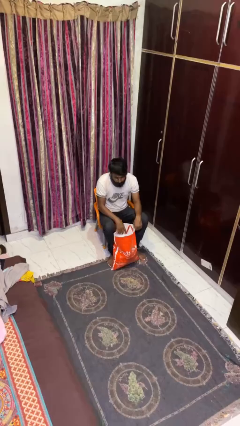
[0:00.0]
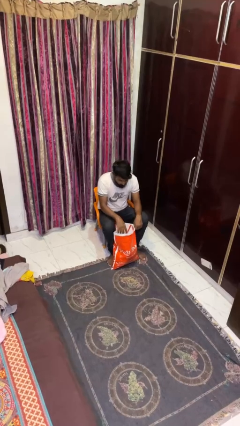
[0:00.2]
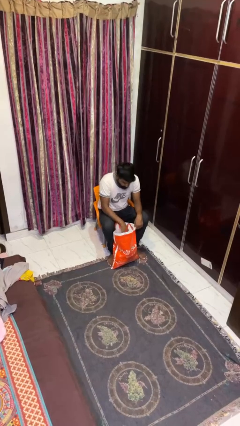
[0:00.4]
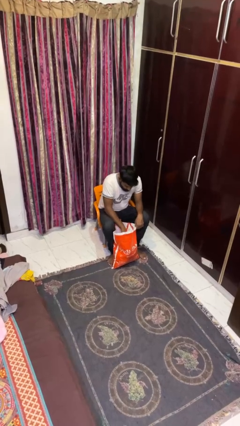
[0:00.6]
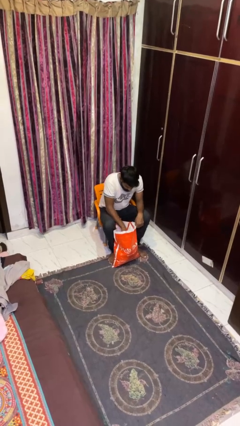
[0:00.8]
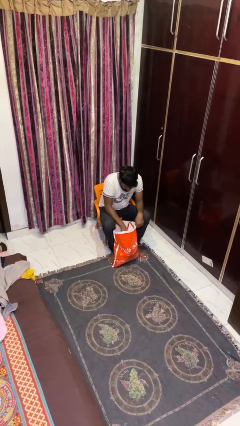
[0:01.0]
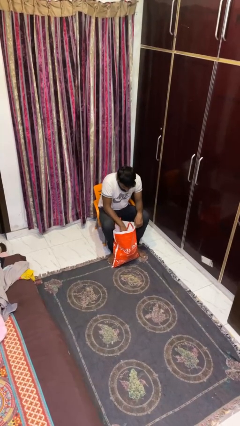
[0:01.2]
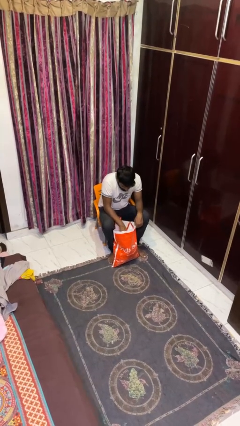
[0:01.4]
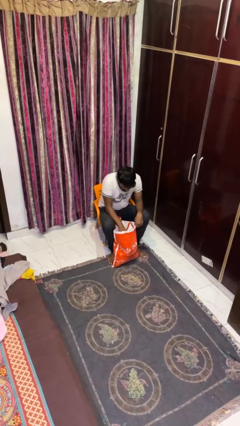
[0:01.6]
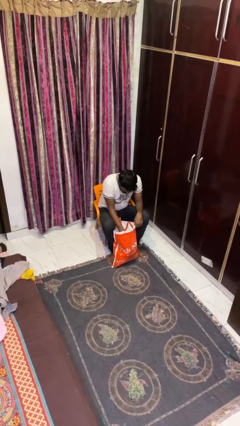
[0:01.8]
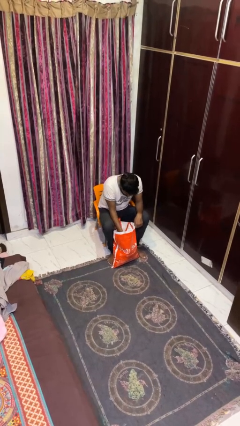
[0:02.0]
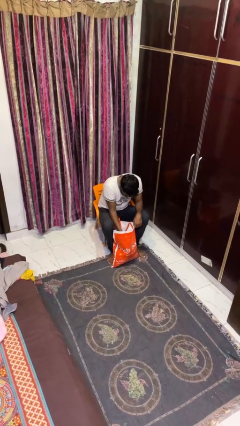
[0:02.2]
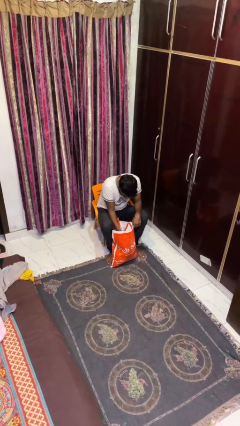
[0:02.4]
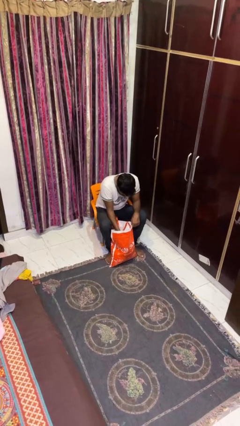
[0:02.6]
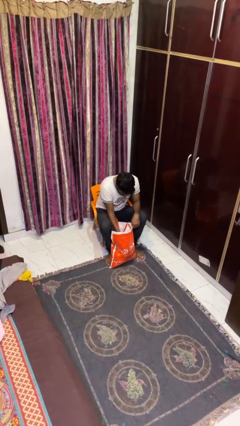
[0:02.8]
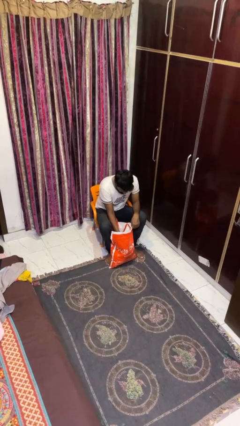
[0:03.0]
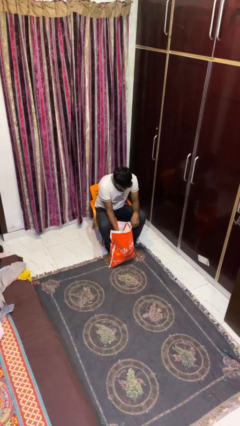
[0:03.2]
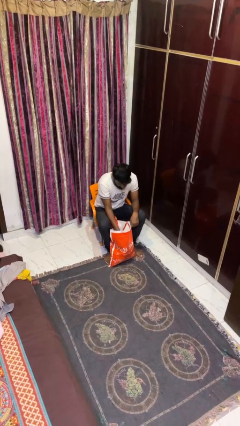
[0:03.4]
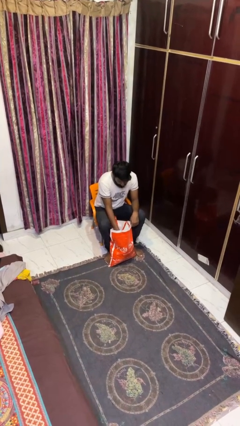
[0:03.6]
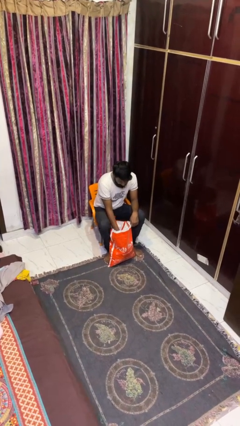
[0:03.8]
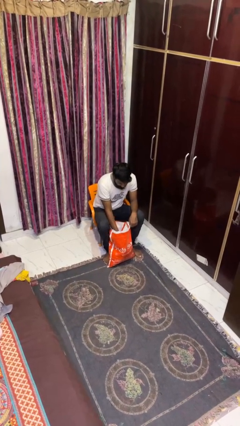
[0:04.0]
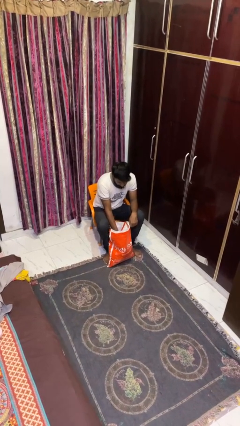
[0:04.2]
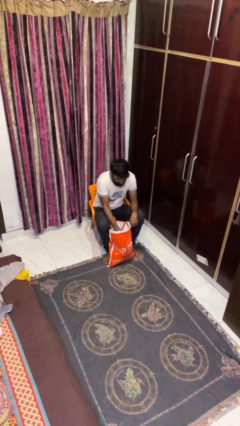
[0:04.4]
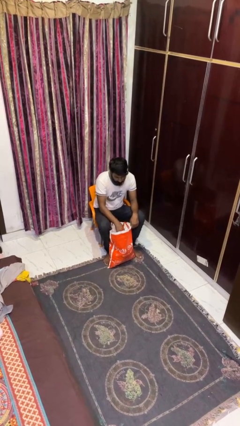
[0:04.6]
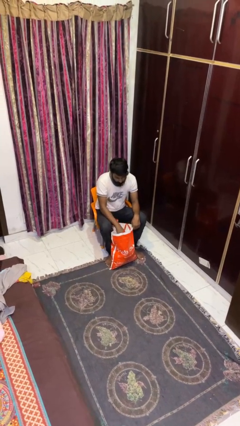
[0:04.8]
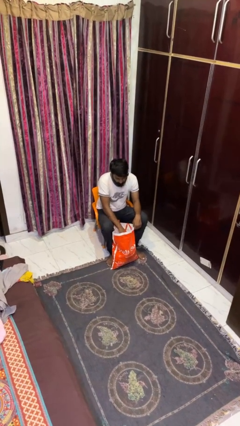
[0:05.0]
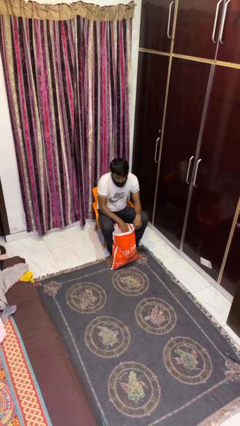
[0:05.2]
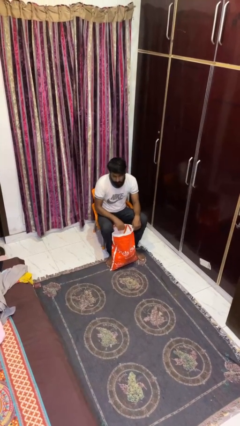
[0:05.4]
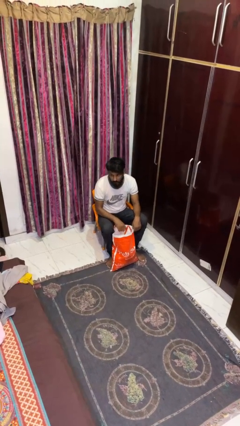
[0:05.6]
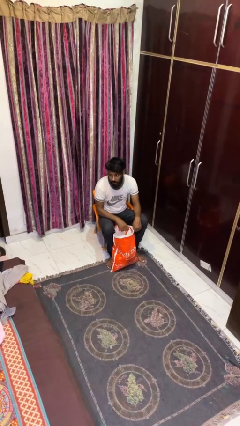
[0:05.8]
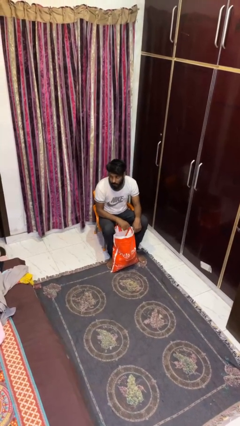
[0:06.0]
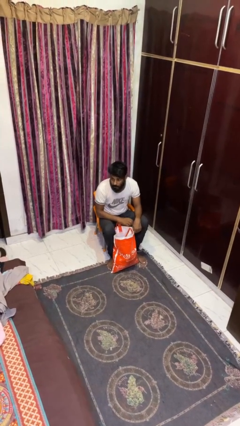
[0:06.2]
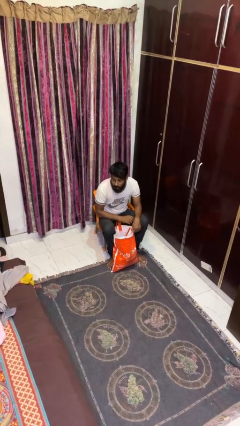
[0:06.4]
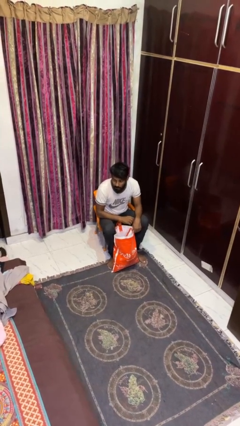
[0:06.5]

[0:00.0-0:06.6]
person searches in bag

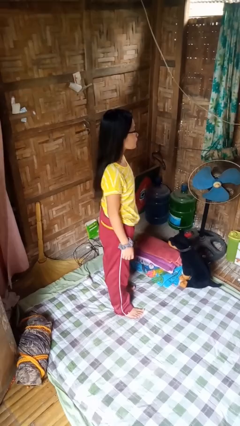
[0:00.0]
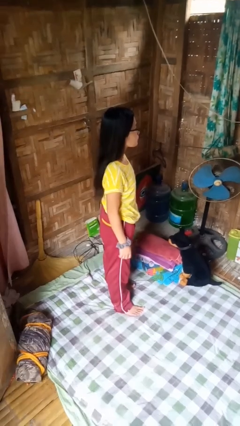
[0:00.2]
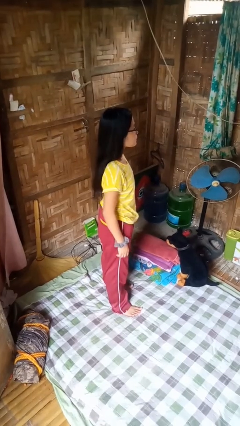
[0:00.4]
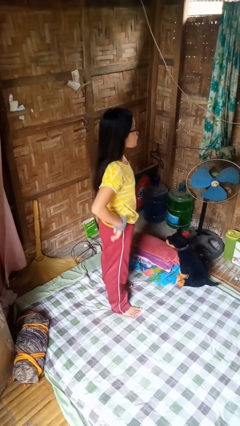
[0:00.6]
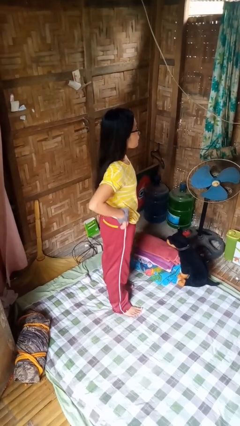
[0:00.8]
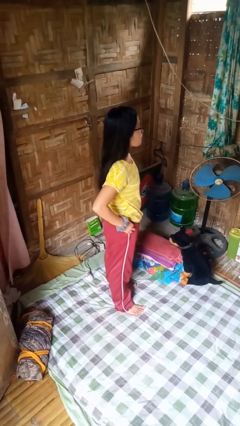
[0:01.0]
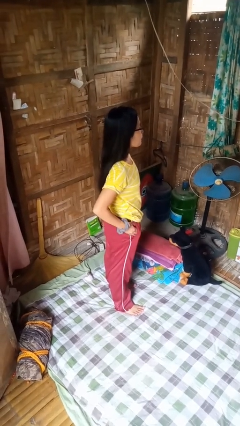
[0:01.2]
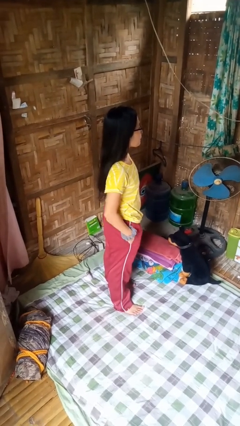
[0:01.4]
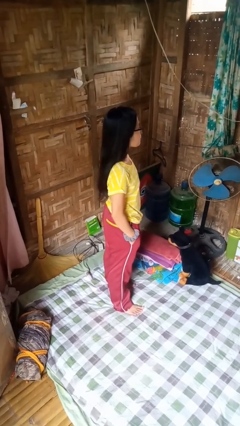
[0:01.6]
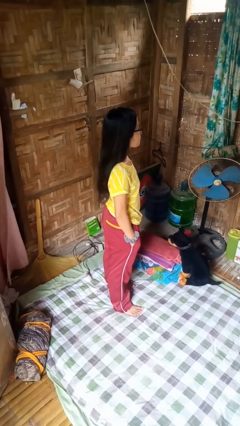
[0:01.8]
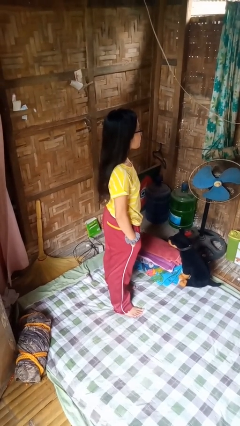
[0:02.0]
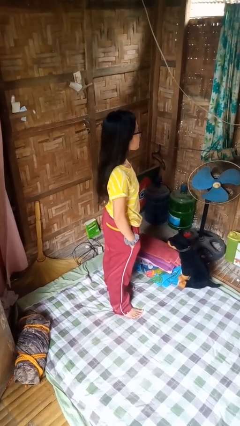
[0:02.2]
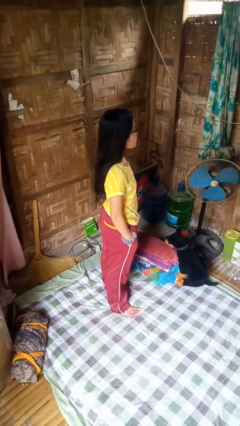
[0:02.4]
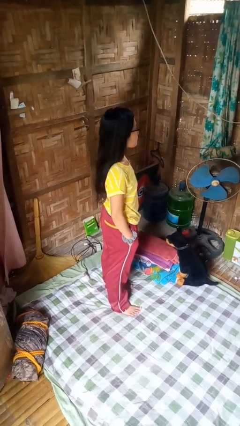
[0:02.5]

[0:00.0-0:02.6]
person puts hands in back pockets

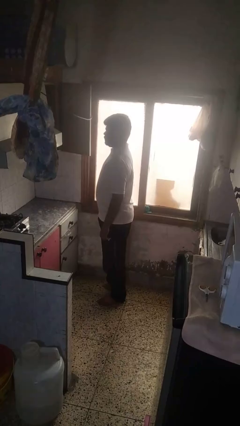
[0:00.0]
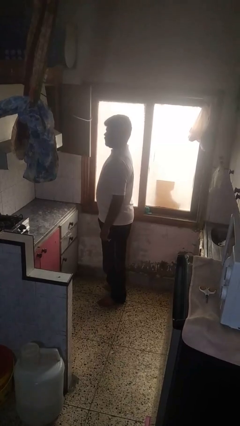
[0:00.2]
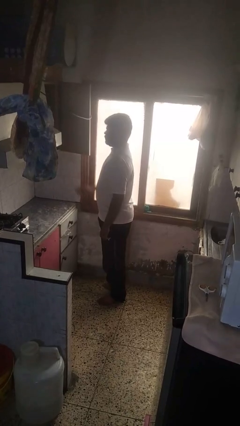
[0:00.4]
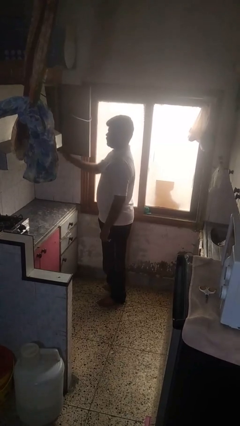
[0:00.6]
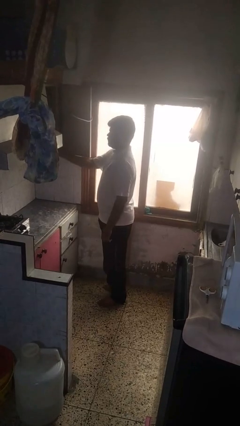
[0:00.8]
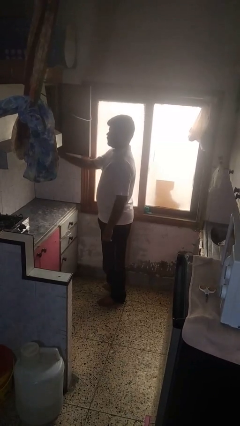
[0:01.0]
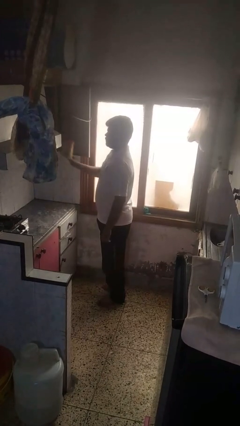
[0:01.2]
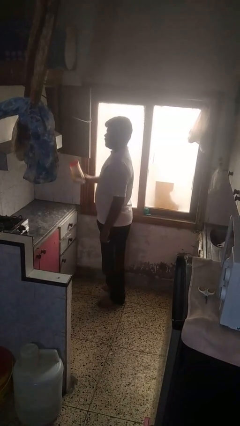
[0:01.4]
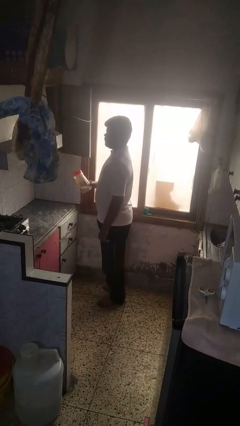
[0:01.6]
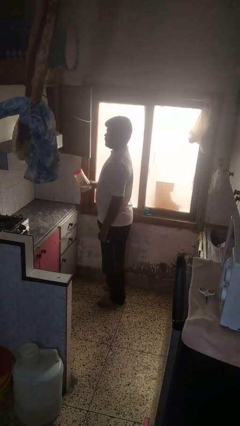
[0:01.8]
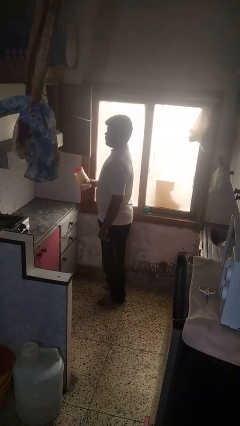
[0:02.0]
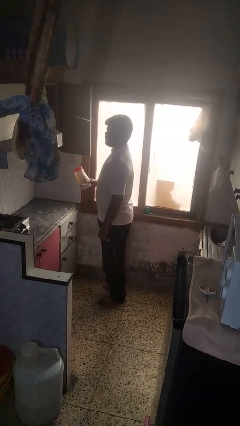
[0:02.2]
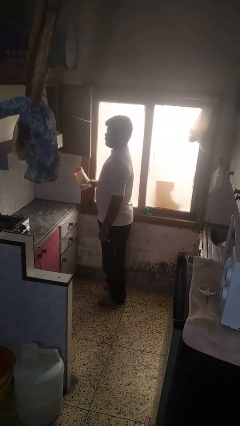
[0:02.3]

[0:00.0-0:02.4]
person picks up object from cabinet

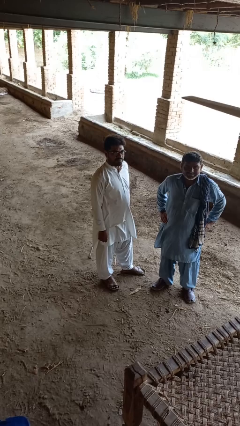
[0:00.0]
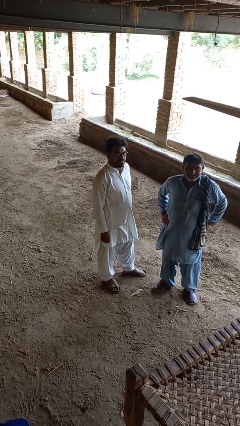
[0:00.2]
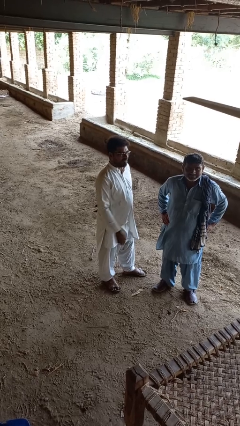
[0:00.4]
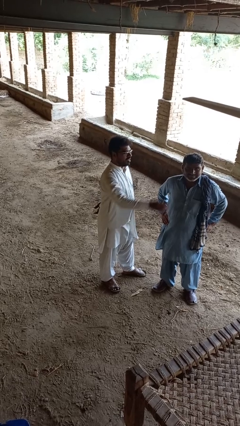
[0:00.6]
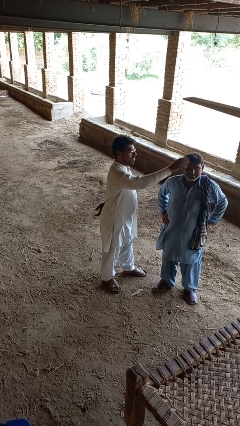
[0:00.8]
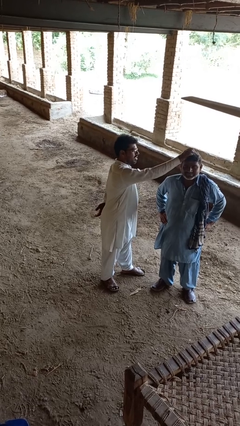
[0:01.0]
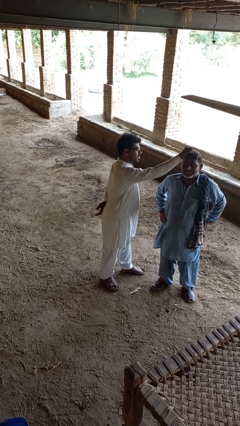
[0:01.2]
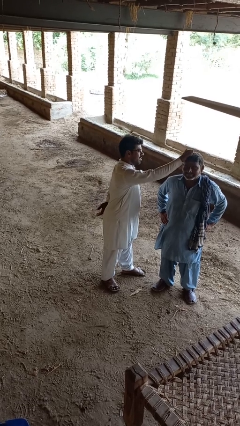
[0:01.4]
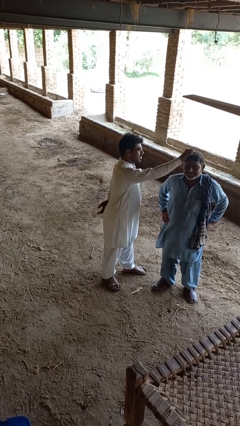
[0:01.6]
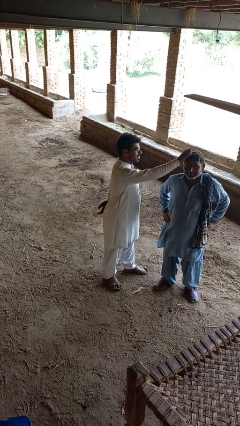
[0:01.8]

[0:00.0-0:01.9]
person grabs person by hair

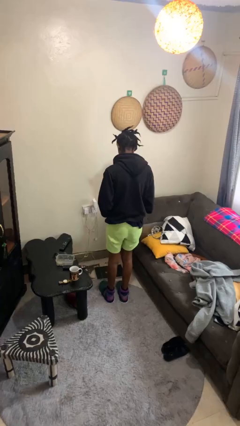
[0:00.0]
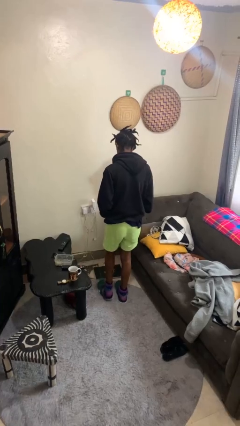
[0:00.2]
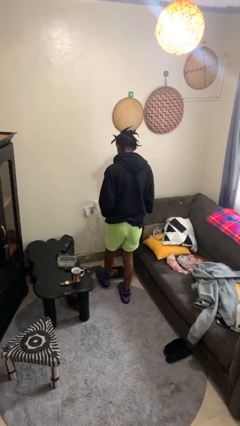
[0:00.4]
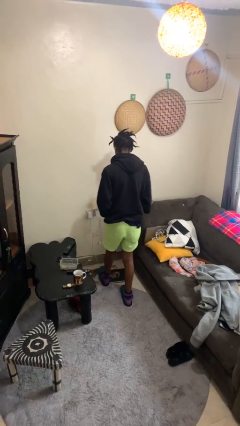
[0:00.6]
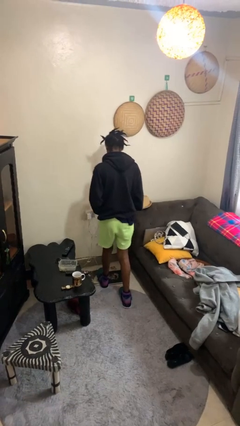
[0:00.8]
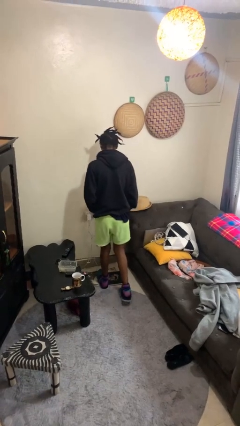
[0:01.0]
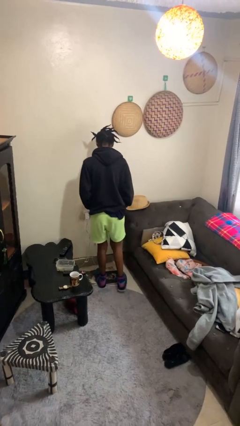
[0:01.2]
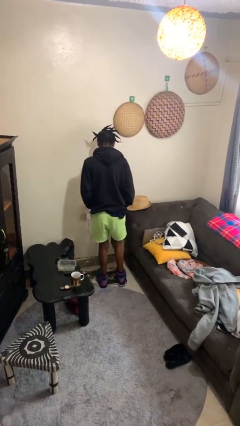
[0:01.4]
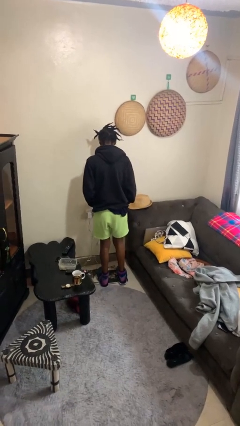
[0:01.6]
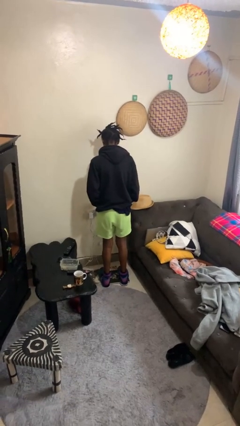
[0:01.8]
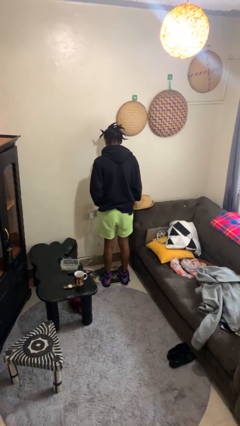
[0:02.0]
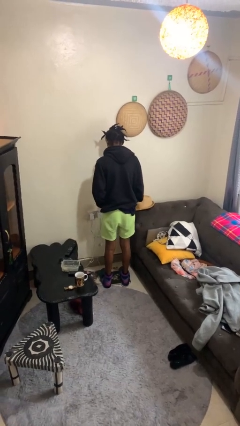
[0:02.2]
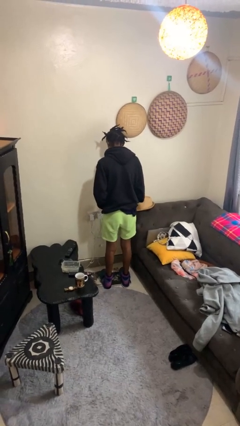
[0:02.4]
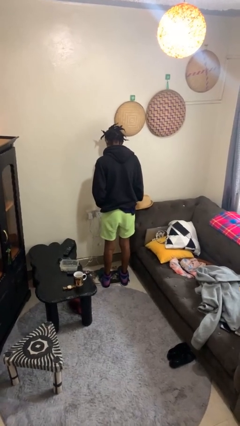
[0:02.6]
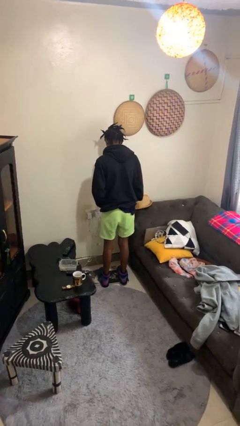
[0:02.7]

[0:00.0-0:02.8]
person uses bodyweight scale

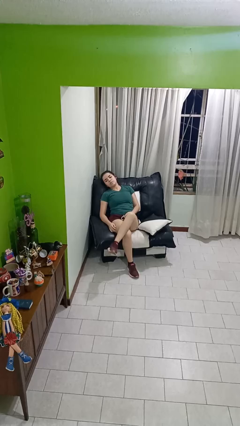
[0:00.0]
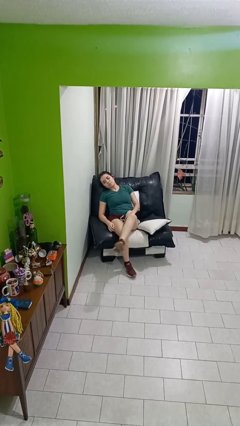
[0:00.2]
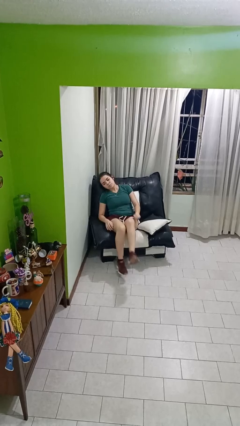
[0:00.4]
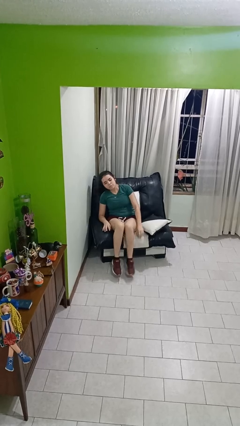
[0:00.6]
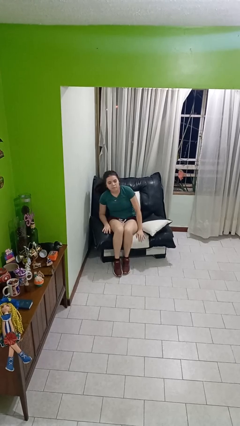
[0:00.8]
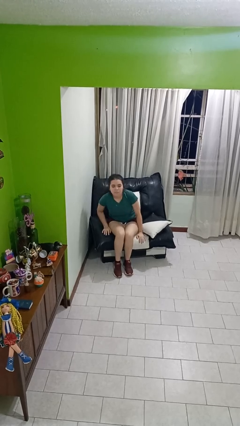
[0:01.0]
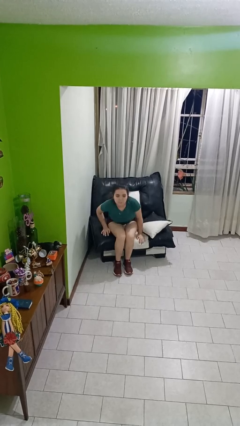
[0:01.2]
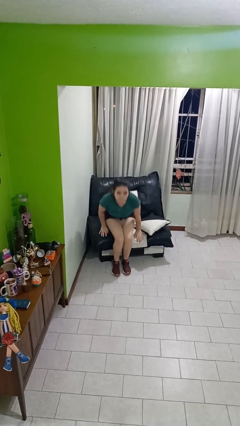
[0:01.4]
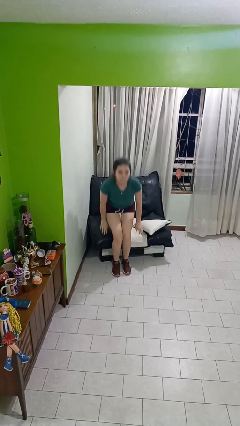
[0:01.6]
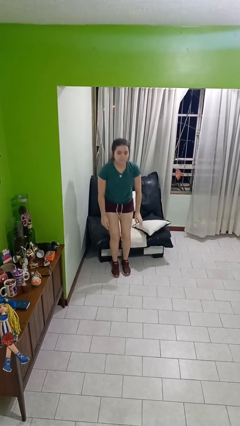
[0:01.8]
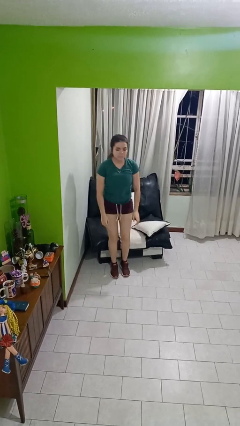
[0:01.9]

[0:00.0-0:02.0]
person stands up
